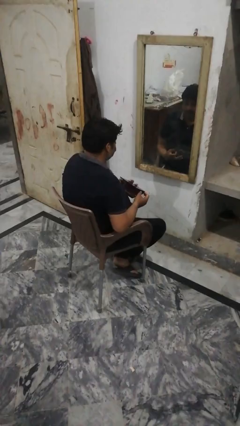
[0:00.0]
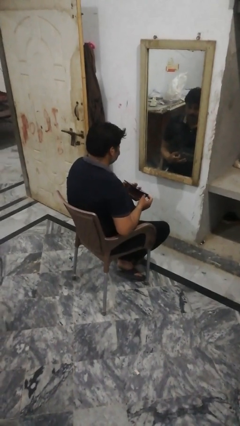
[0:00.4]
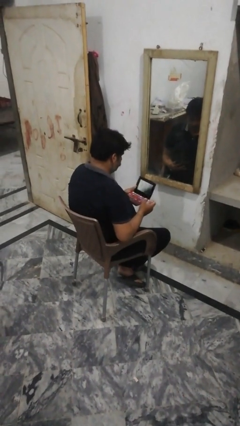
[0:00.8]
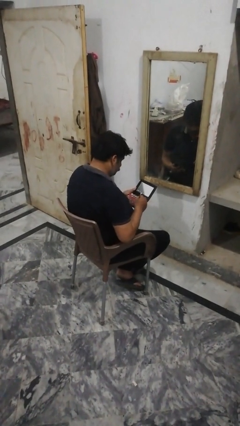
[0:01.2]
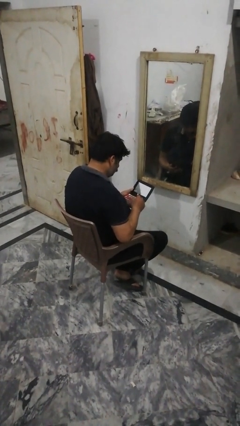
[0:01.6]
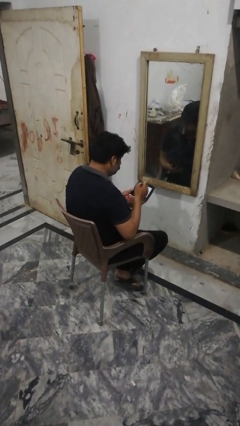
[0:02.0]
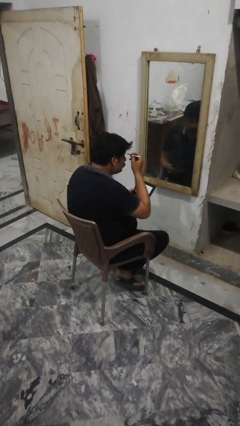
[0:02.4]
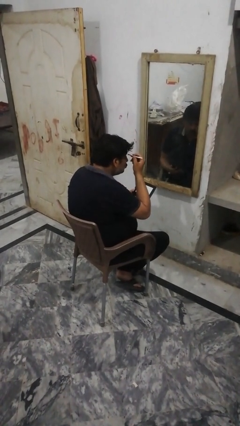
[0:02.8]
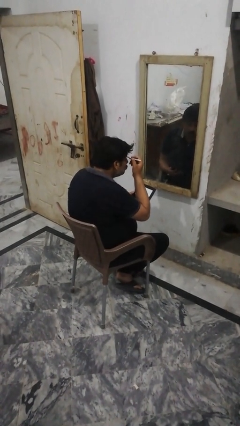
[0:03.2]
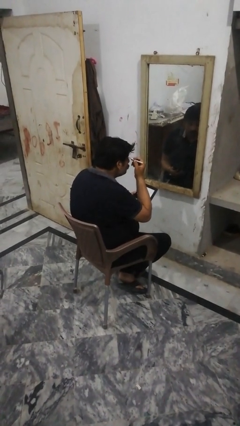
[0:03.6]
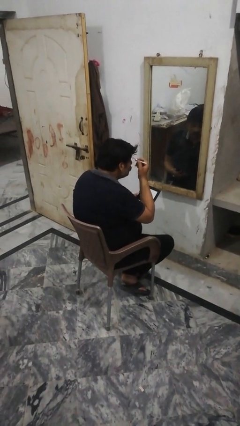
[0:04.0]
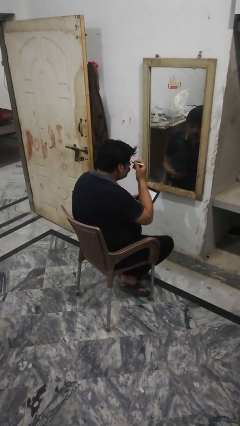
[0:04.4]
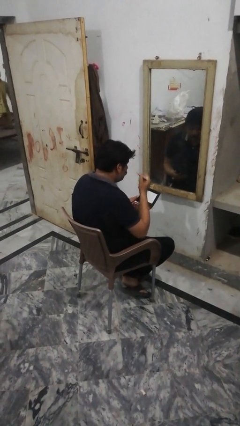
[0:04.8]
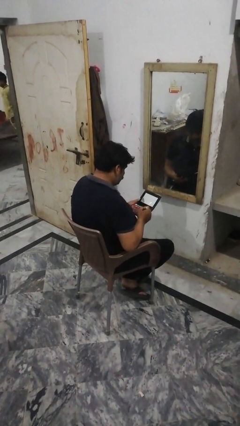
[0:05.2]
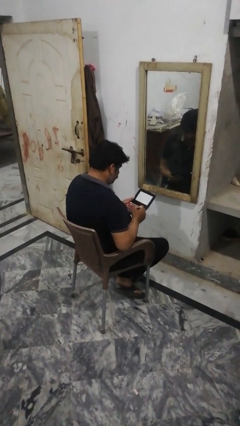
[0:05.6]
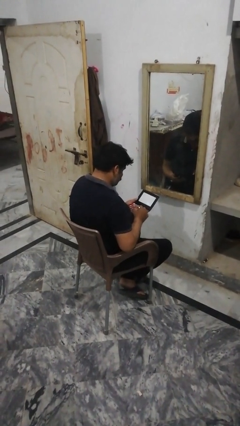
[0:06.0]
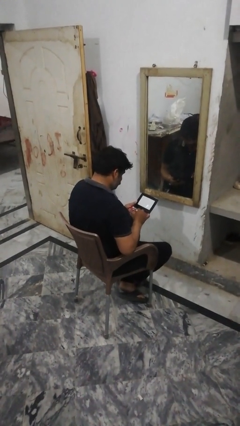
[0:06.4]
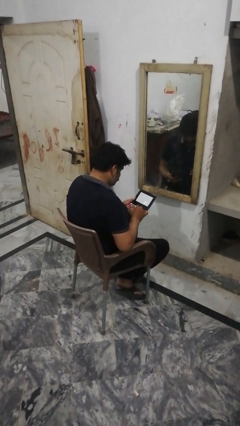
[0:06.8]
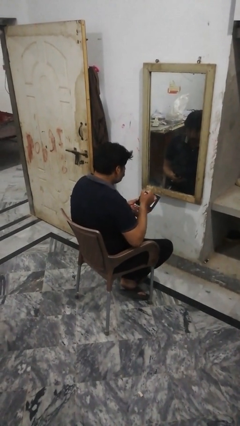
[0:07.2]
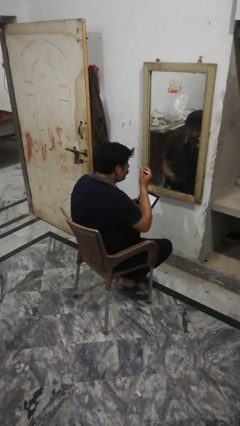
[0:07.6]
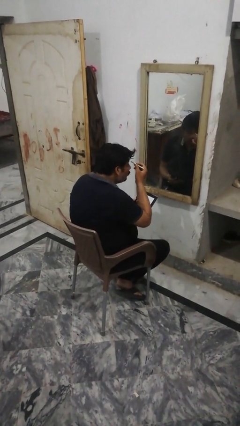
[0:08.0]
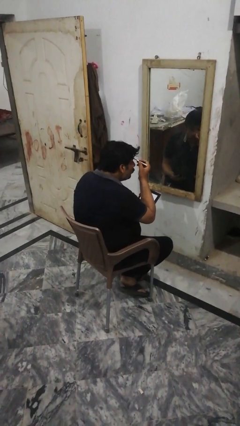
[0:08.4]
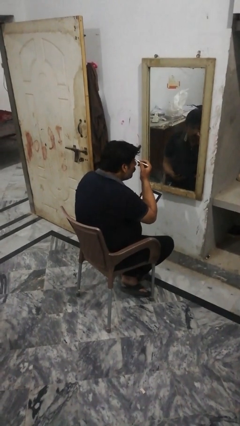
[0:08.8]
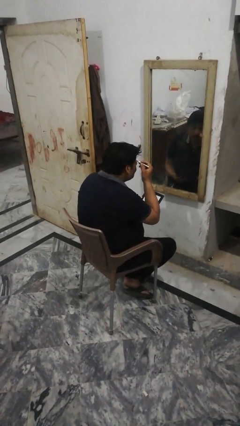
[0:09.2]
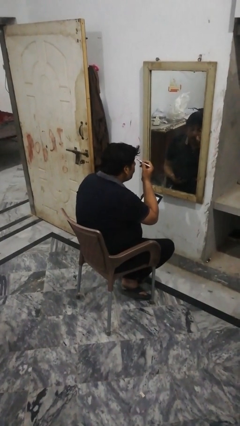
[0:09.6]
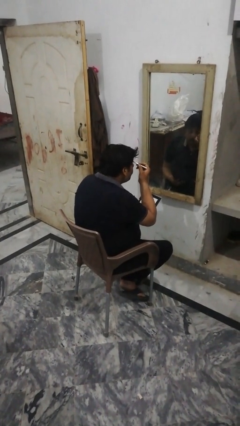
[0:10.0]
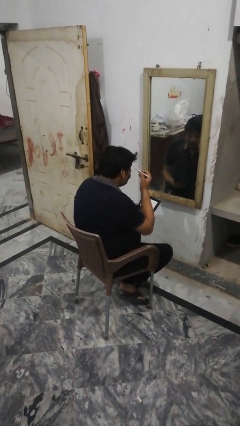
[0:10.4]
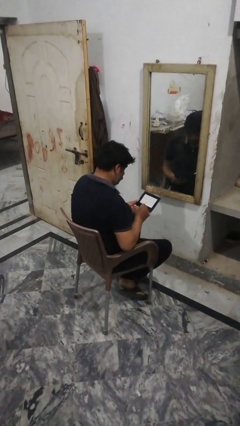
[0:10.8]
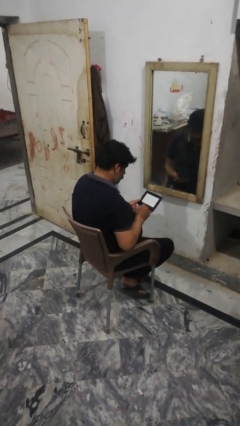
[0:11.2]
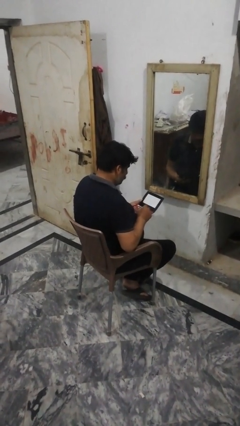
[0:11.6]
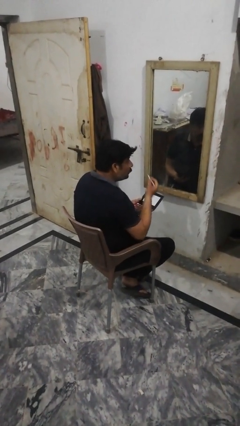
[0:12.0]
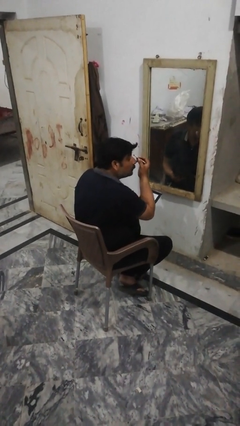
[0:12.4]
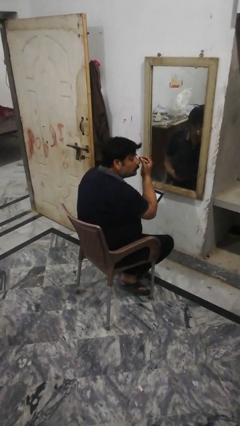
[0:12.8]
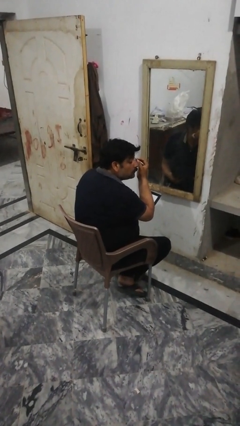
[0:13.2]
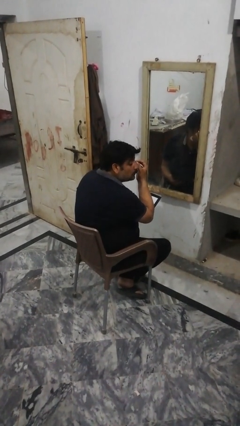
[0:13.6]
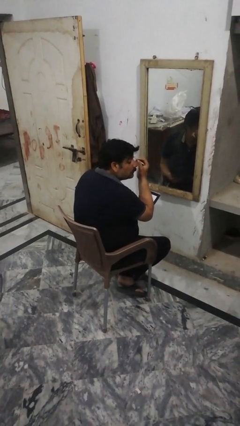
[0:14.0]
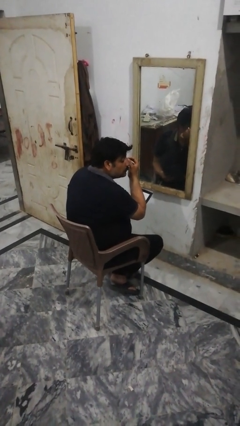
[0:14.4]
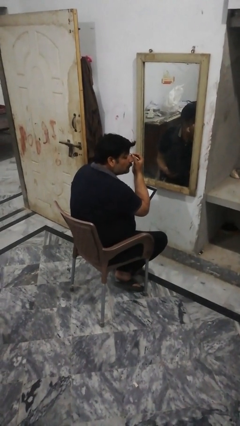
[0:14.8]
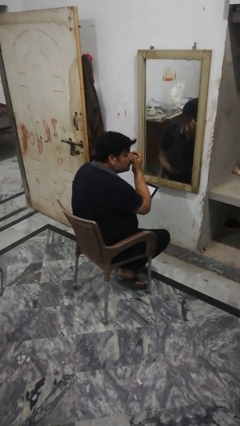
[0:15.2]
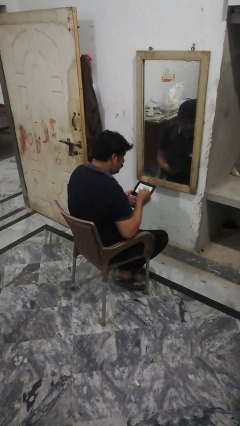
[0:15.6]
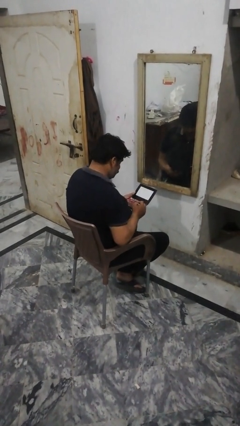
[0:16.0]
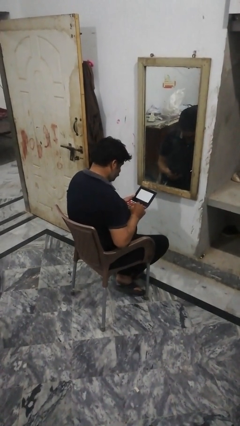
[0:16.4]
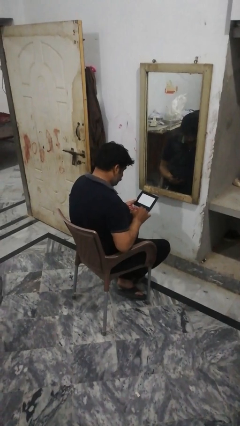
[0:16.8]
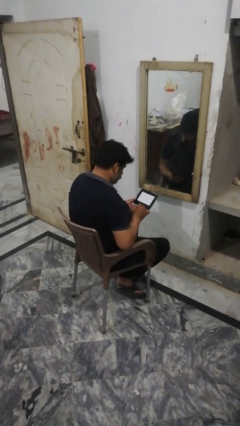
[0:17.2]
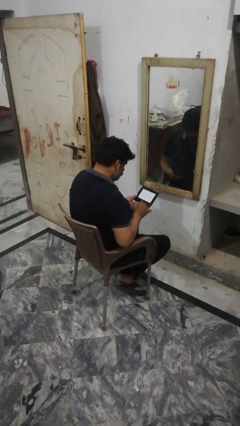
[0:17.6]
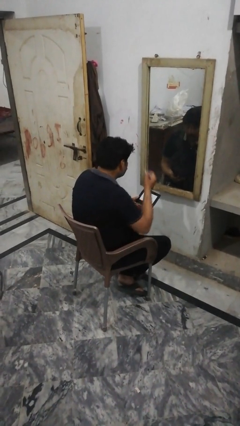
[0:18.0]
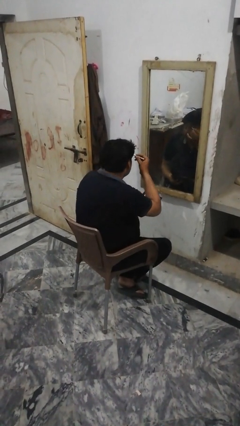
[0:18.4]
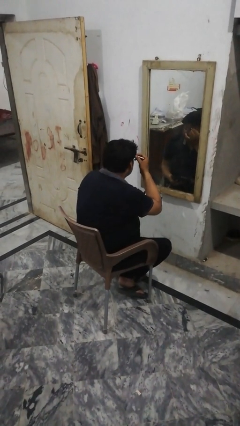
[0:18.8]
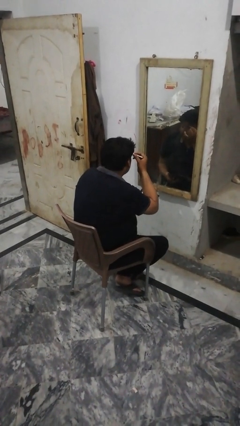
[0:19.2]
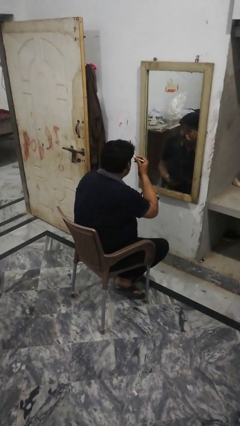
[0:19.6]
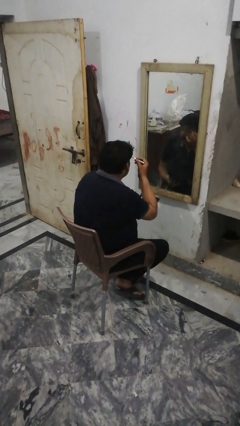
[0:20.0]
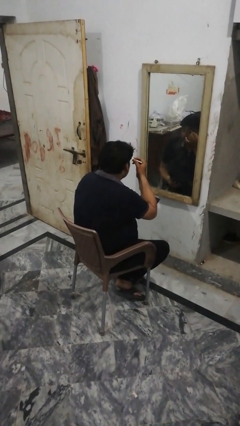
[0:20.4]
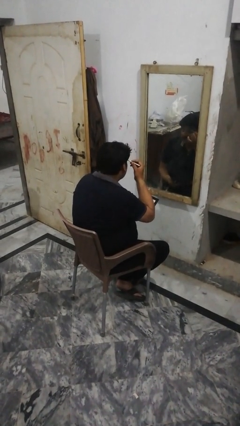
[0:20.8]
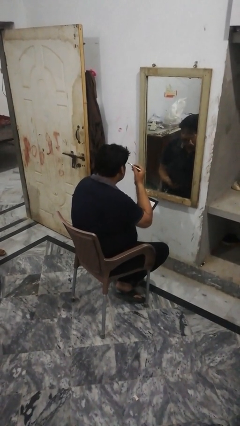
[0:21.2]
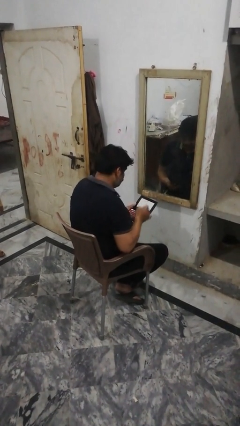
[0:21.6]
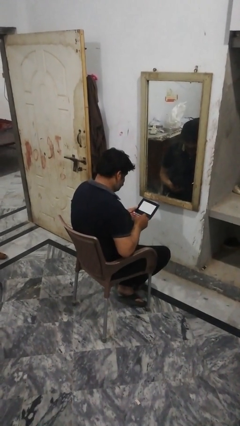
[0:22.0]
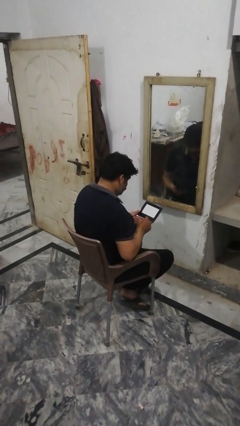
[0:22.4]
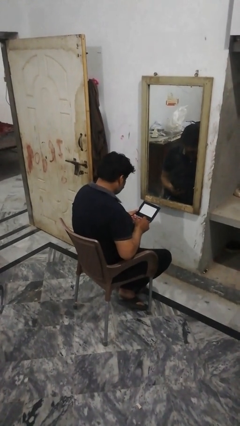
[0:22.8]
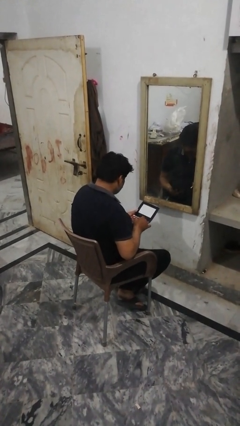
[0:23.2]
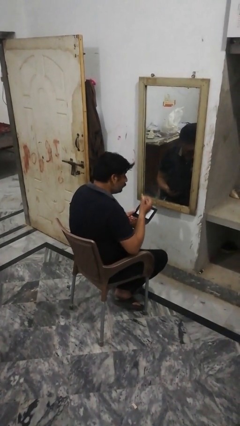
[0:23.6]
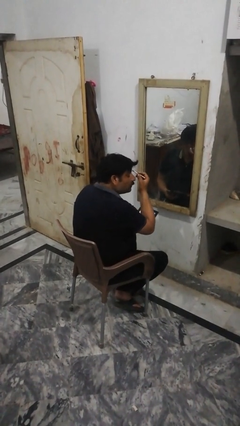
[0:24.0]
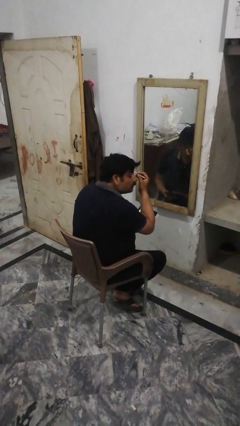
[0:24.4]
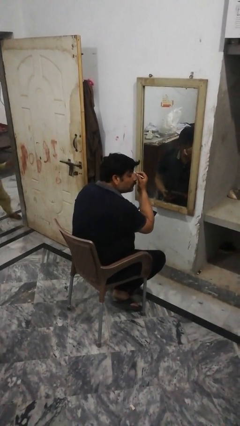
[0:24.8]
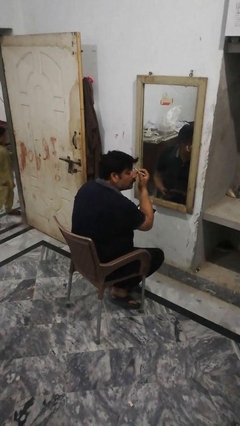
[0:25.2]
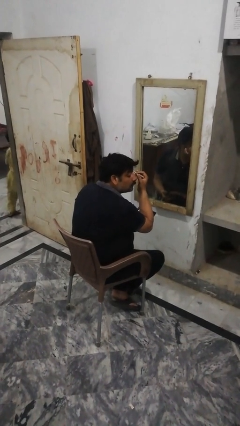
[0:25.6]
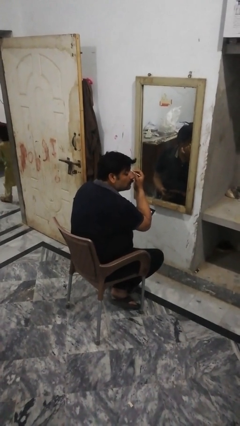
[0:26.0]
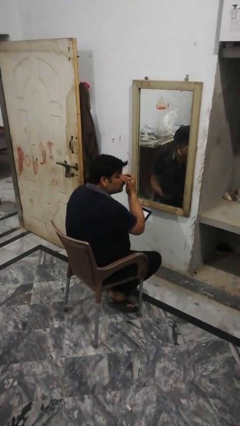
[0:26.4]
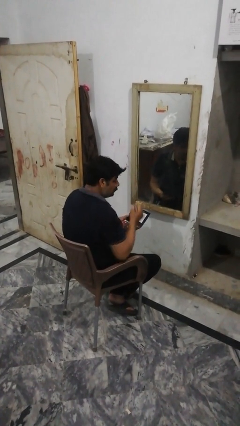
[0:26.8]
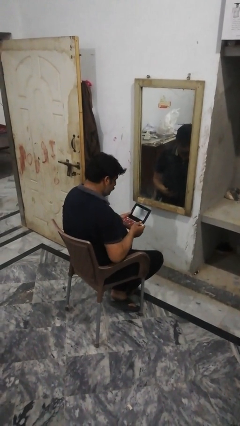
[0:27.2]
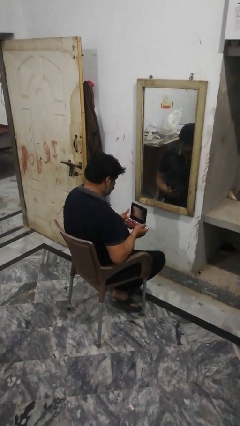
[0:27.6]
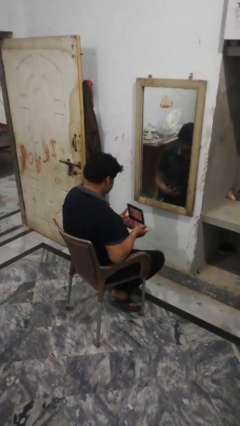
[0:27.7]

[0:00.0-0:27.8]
person applies eye makeup

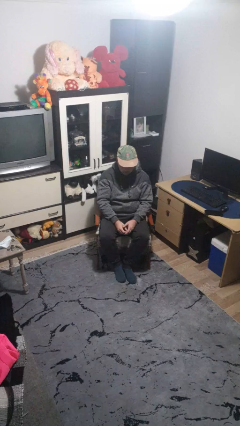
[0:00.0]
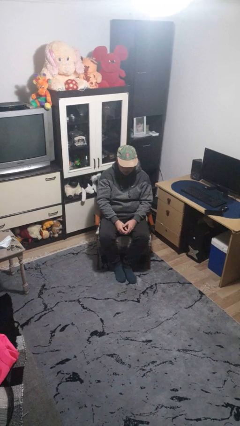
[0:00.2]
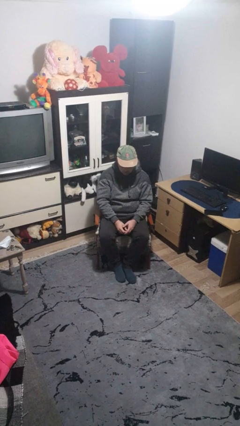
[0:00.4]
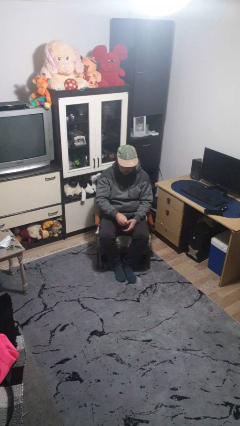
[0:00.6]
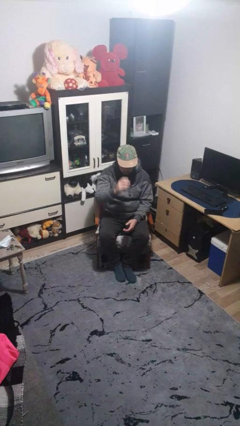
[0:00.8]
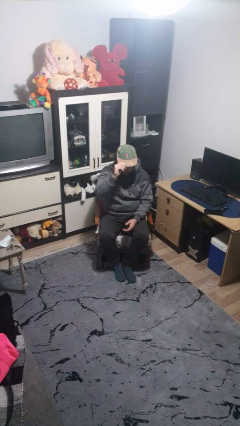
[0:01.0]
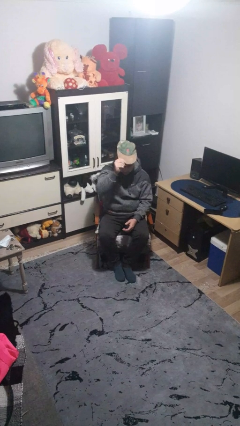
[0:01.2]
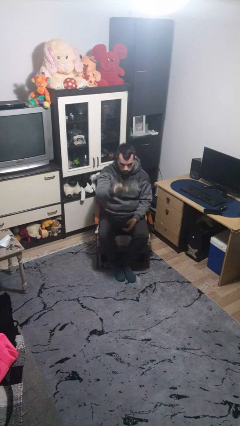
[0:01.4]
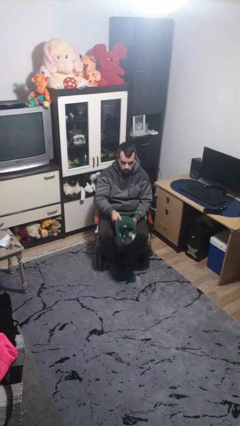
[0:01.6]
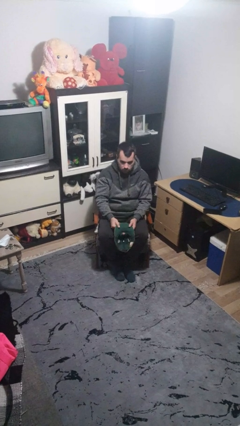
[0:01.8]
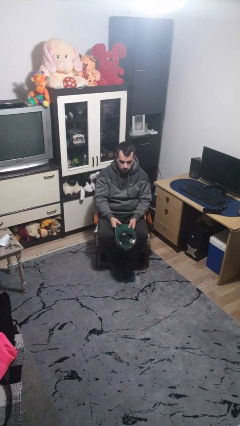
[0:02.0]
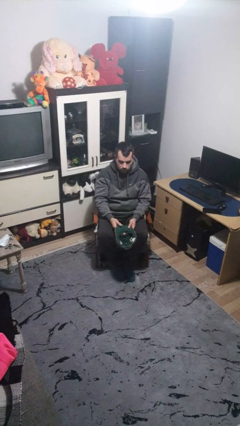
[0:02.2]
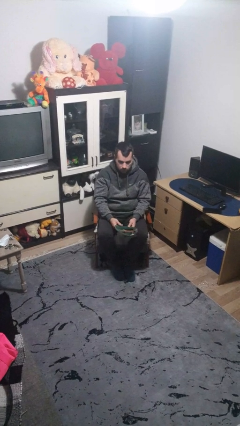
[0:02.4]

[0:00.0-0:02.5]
person takes off hat

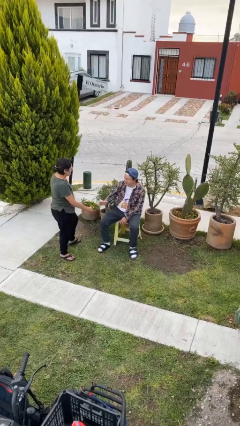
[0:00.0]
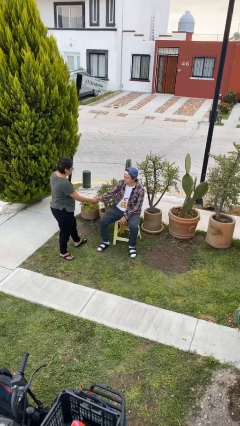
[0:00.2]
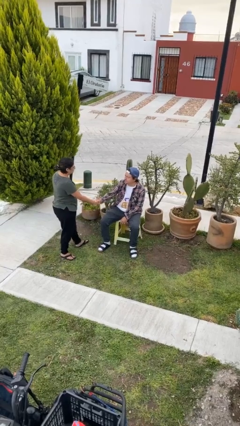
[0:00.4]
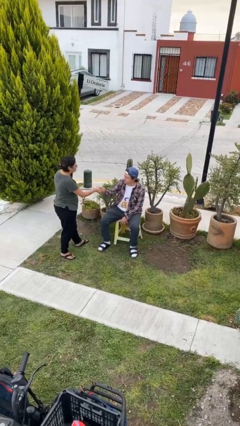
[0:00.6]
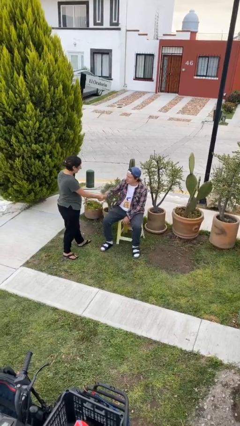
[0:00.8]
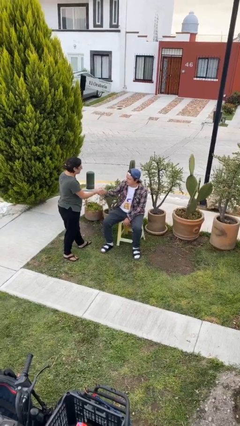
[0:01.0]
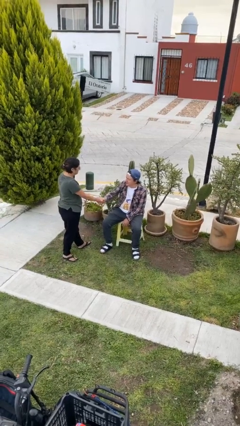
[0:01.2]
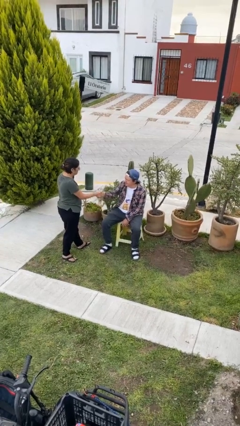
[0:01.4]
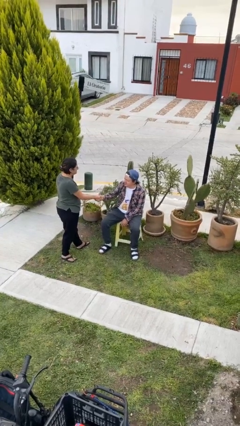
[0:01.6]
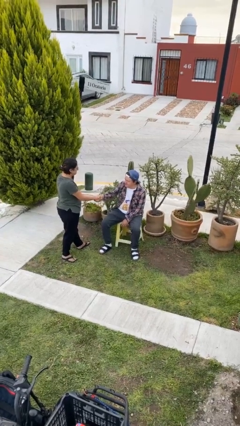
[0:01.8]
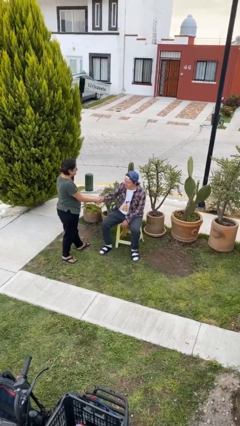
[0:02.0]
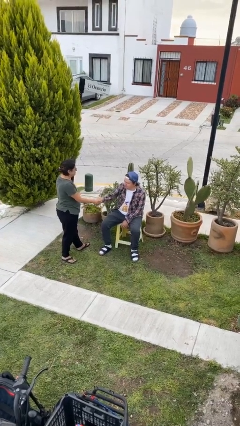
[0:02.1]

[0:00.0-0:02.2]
person shakes hand
